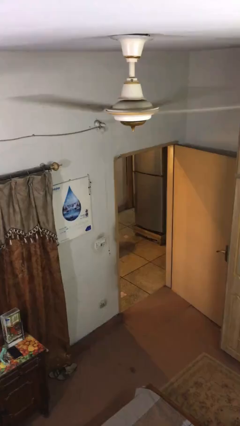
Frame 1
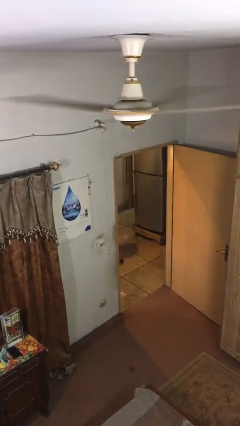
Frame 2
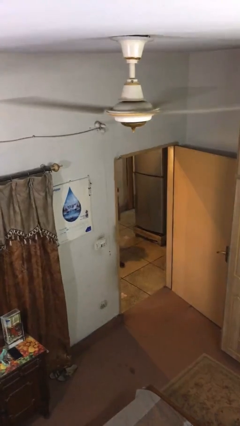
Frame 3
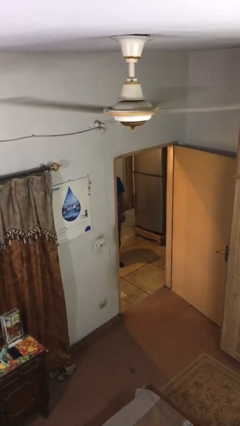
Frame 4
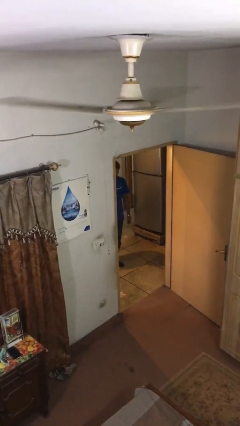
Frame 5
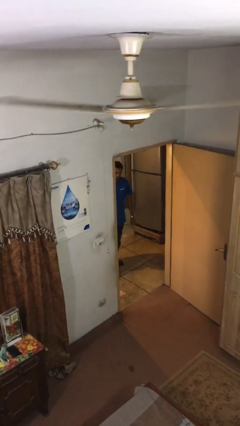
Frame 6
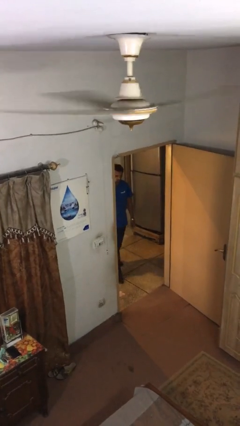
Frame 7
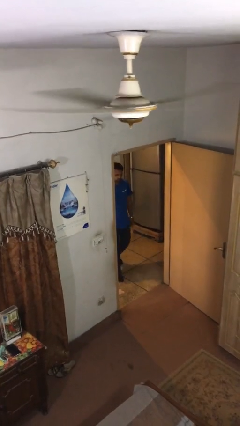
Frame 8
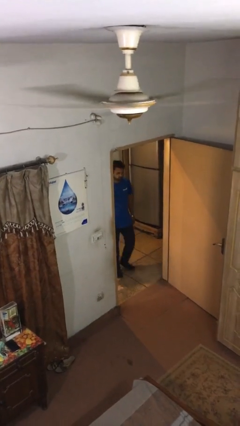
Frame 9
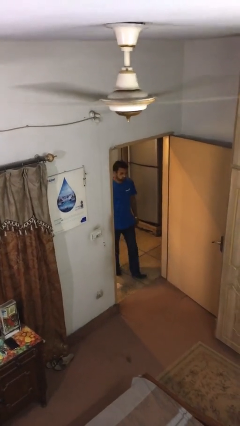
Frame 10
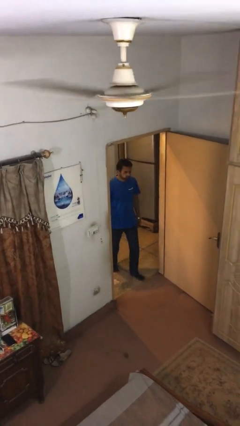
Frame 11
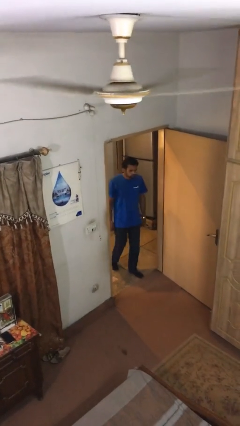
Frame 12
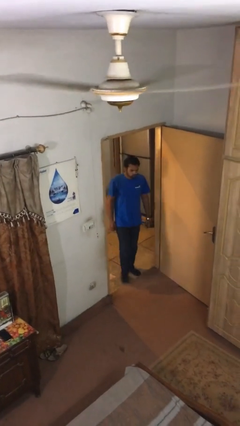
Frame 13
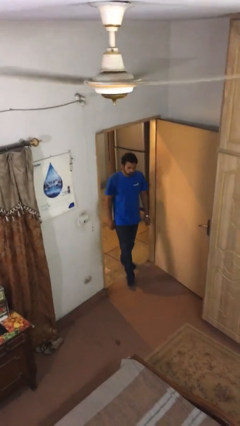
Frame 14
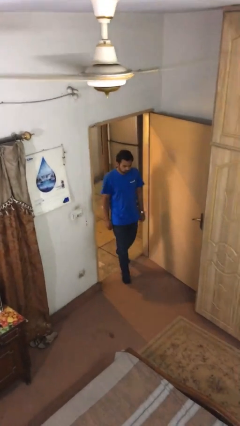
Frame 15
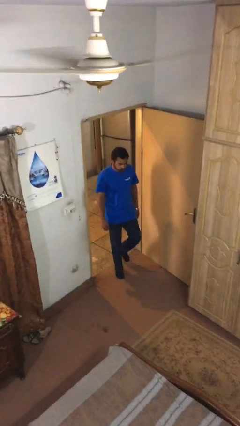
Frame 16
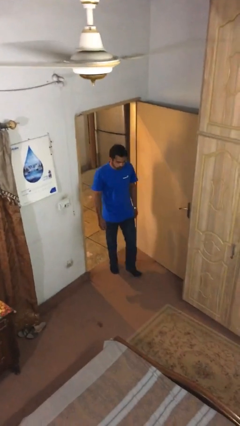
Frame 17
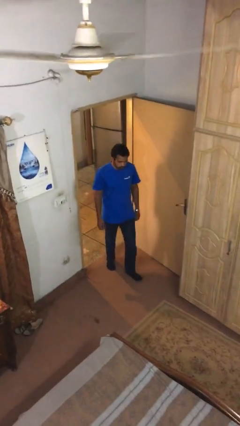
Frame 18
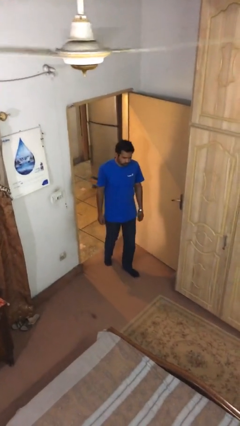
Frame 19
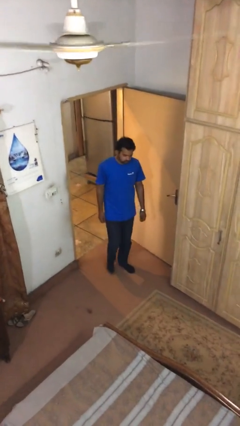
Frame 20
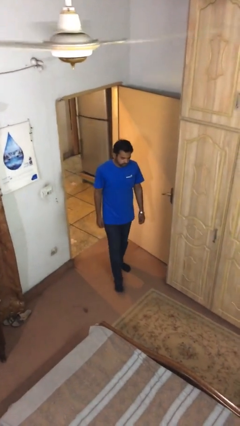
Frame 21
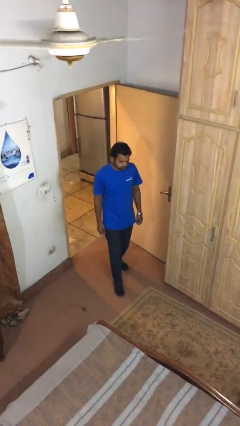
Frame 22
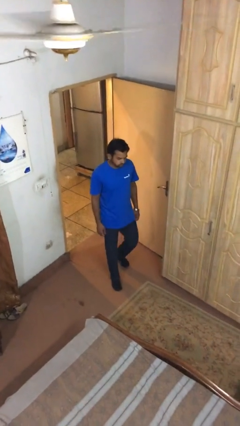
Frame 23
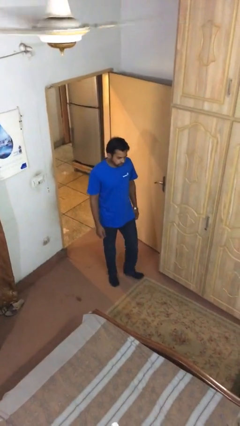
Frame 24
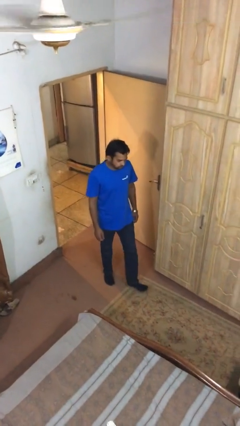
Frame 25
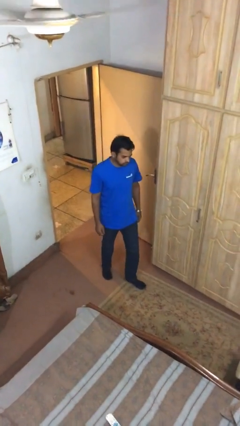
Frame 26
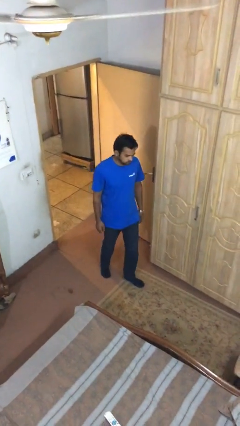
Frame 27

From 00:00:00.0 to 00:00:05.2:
person enters scene through structure

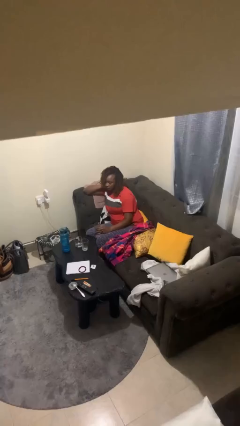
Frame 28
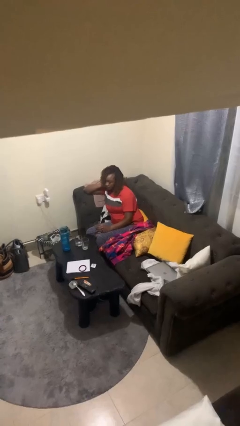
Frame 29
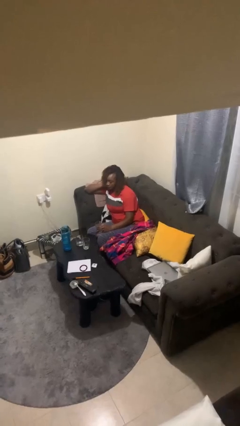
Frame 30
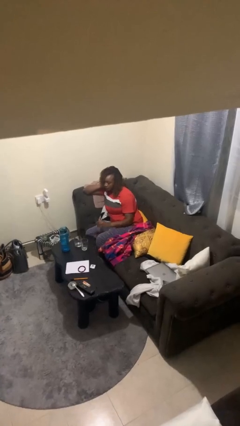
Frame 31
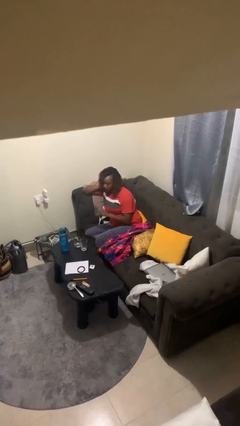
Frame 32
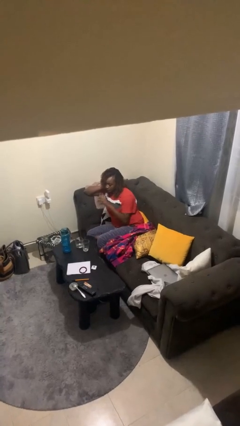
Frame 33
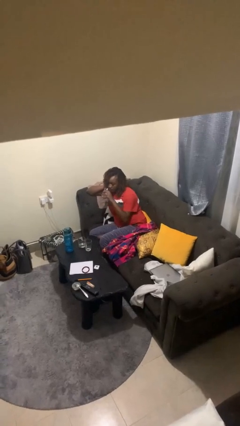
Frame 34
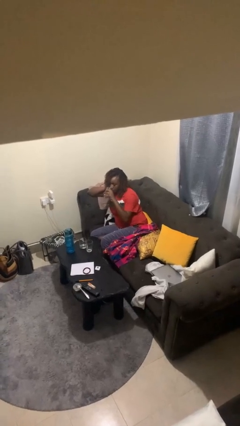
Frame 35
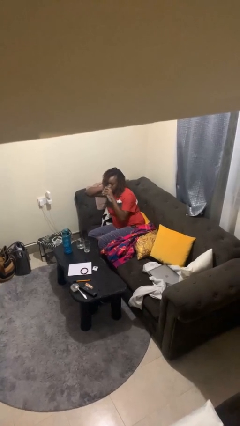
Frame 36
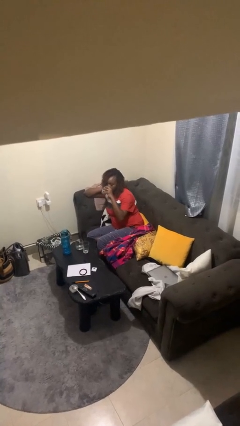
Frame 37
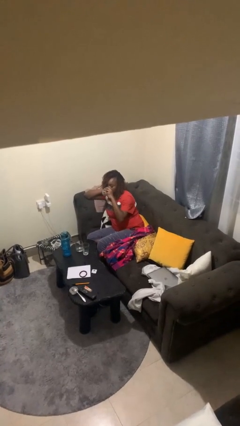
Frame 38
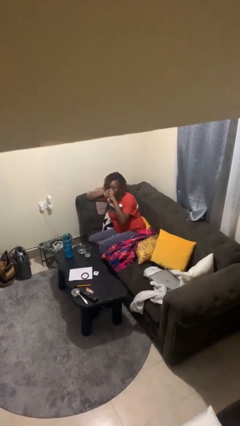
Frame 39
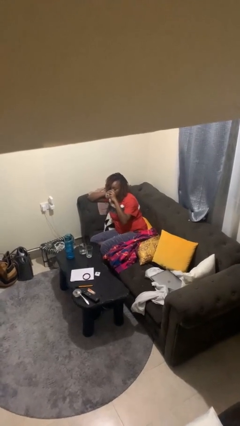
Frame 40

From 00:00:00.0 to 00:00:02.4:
person drinks from shotglass

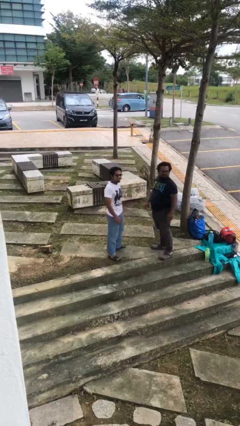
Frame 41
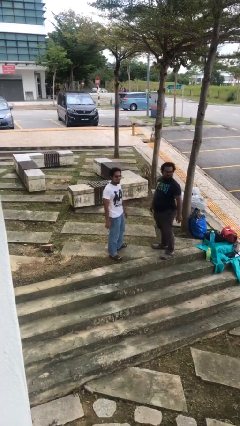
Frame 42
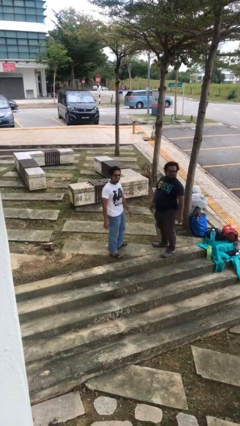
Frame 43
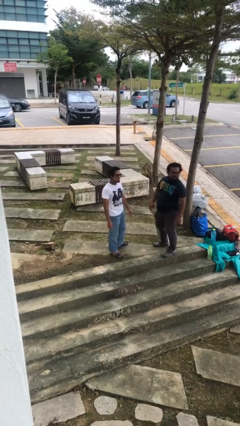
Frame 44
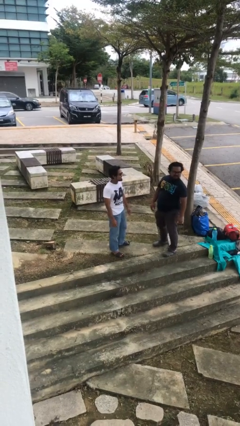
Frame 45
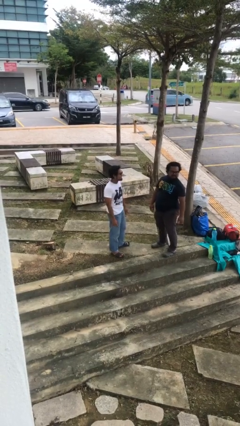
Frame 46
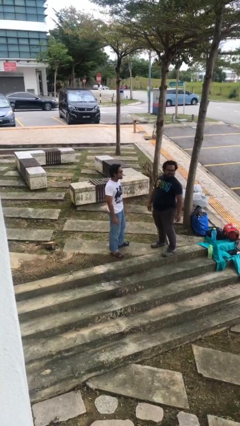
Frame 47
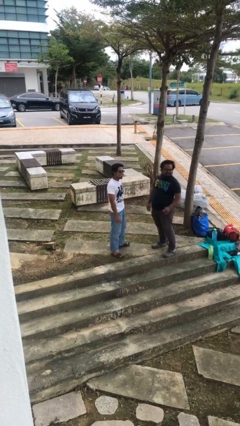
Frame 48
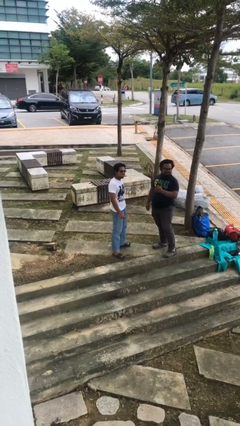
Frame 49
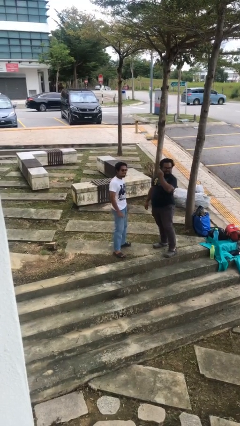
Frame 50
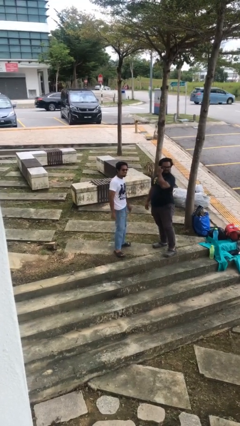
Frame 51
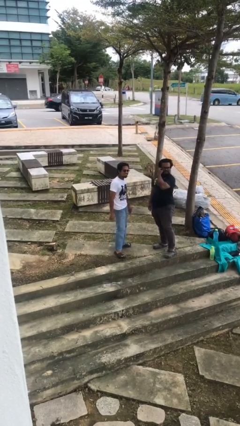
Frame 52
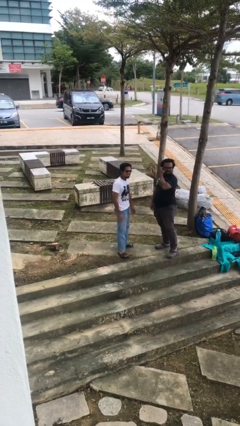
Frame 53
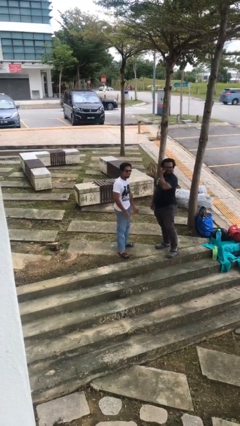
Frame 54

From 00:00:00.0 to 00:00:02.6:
person talks to person

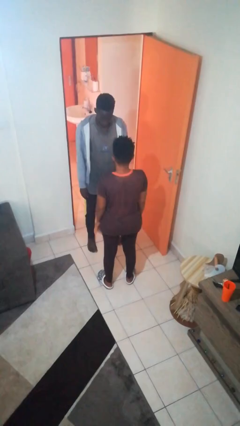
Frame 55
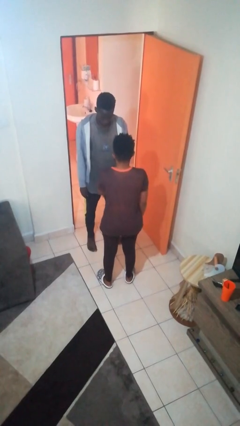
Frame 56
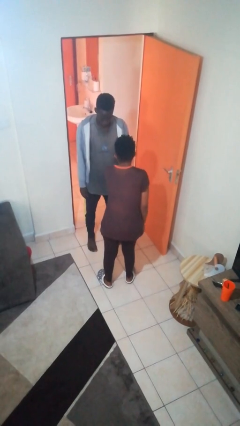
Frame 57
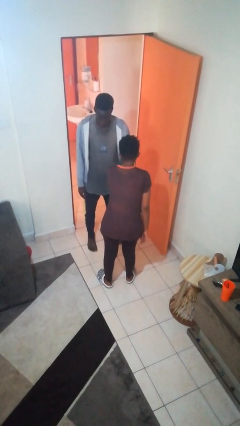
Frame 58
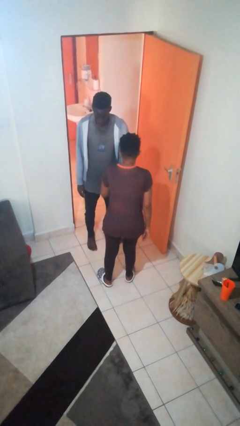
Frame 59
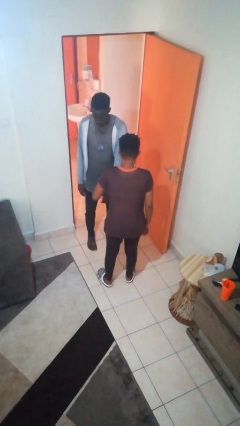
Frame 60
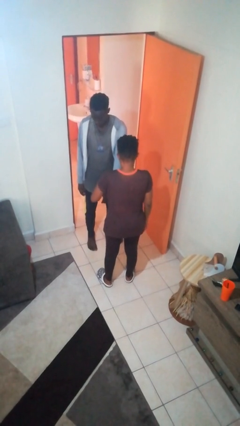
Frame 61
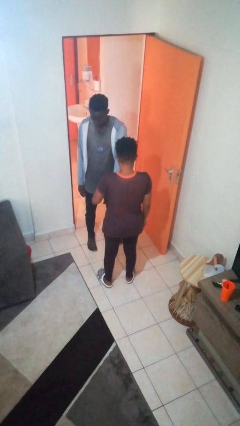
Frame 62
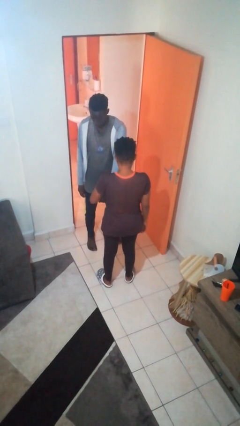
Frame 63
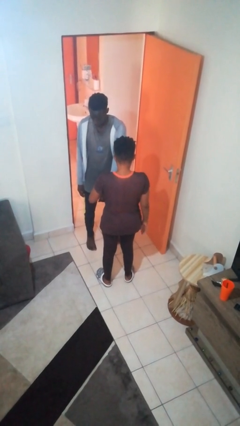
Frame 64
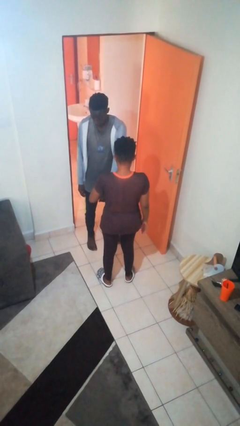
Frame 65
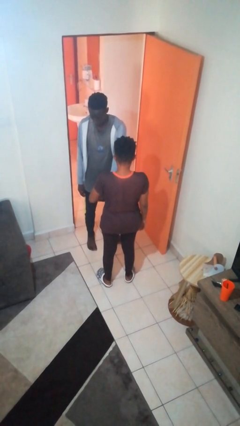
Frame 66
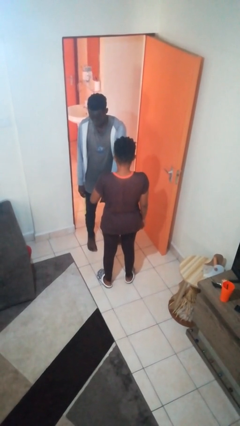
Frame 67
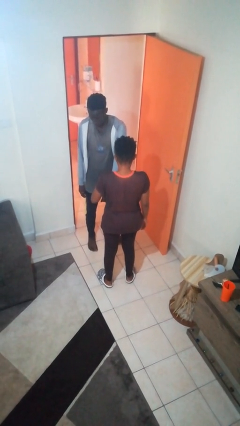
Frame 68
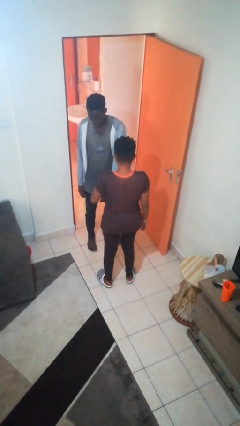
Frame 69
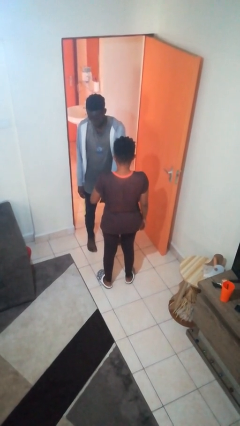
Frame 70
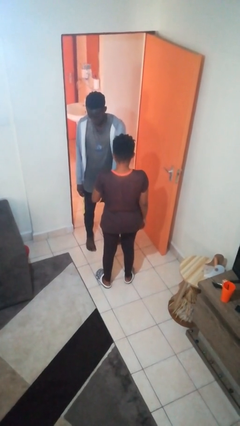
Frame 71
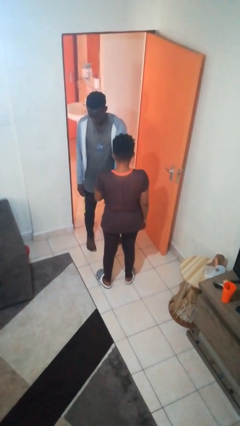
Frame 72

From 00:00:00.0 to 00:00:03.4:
person grabs person by forearm

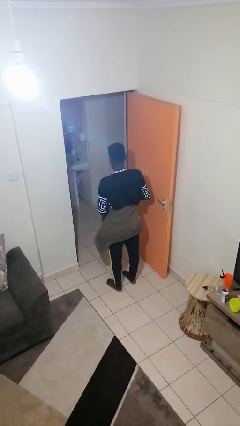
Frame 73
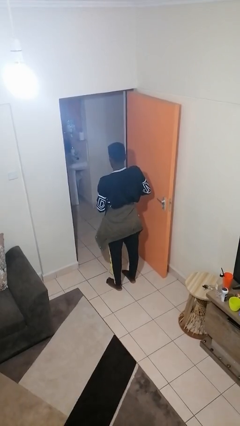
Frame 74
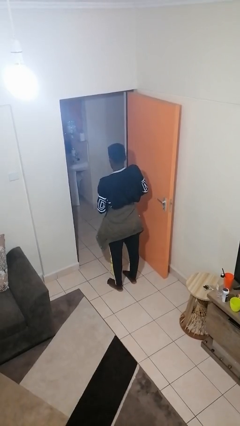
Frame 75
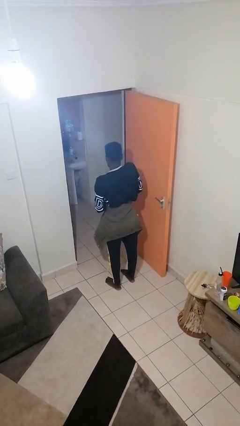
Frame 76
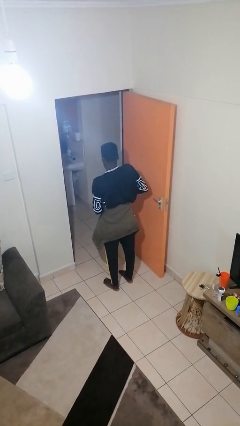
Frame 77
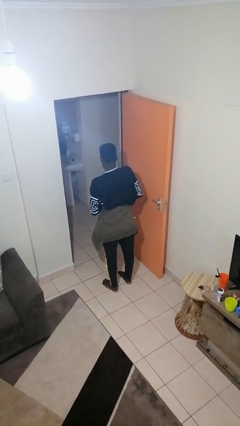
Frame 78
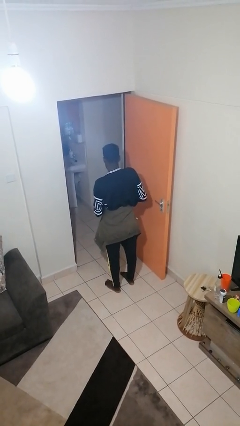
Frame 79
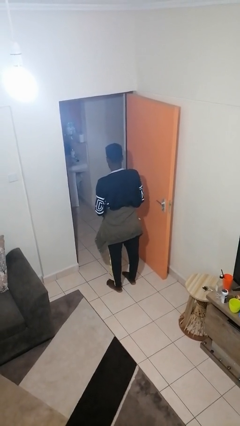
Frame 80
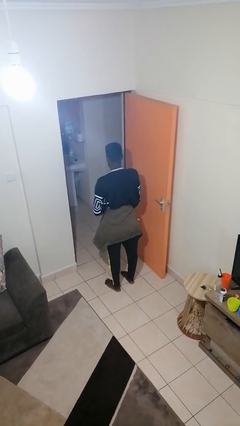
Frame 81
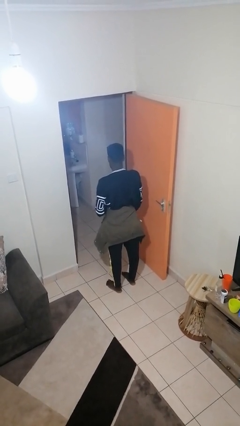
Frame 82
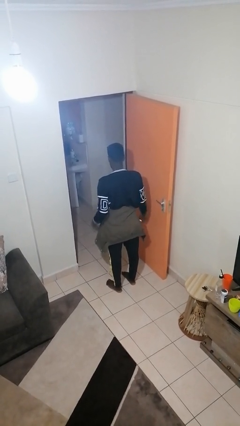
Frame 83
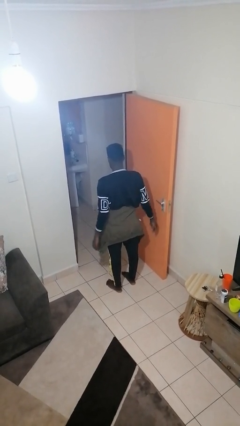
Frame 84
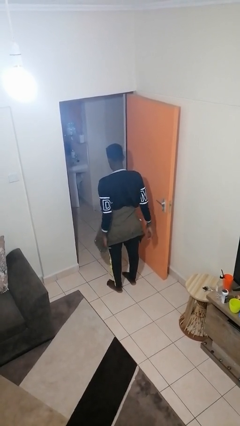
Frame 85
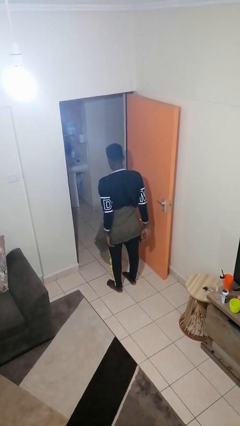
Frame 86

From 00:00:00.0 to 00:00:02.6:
person ties jacket around waist

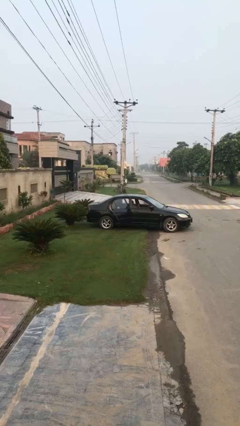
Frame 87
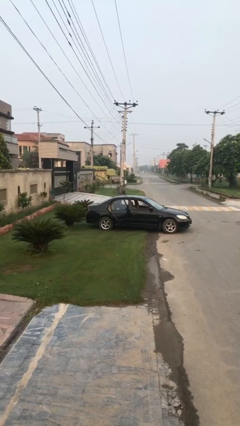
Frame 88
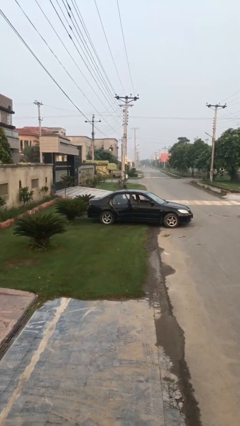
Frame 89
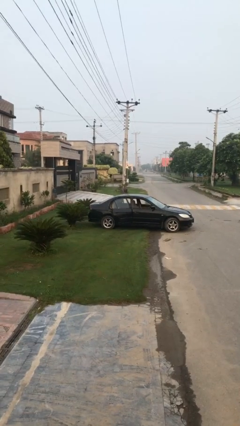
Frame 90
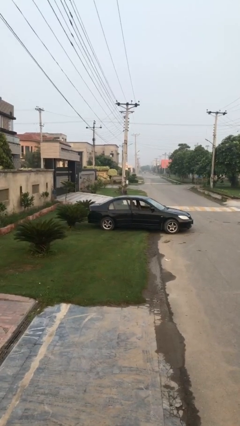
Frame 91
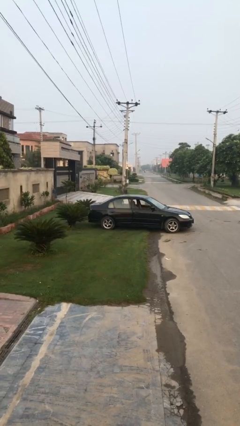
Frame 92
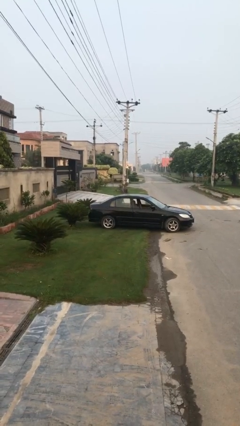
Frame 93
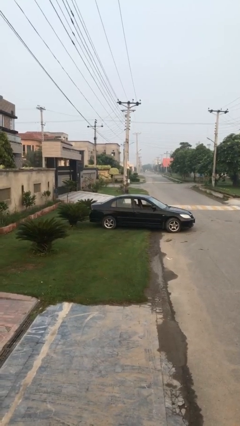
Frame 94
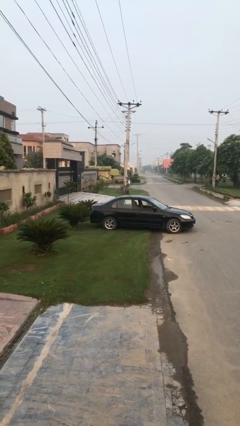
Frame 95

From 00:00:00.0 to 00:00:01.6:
person closes car door
